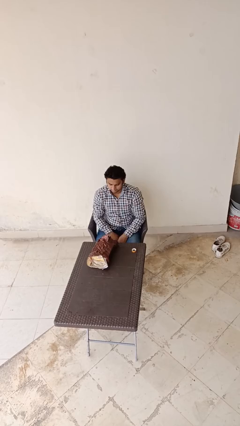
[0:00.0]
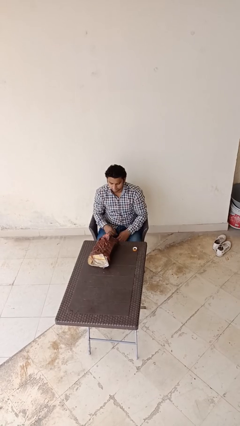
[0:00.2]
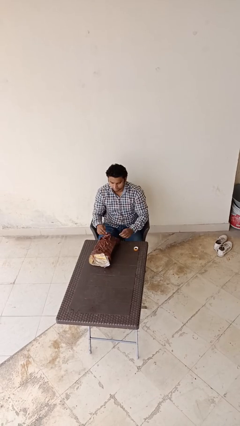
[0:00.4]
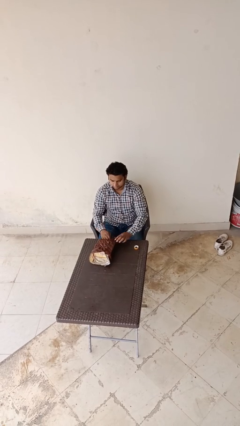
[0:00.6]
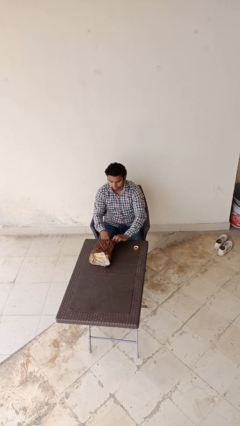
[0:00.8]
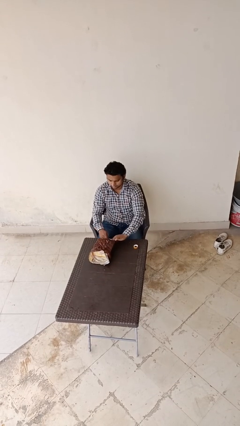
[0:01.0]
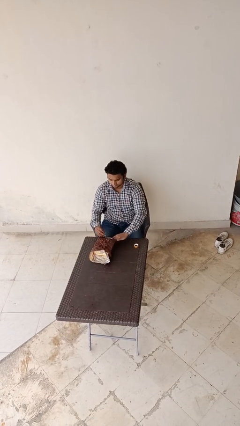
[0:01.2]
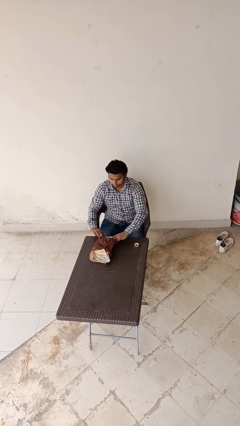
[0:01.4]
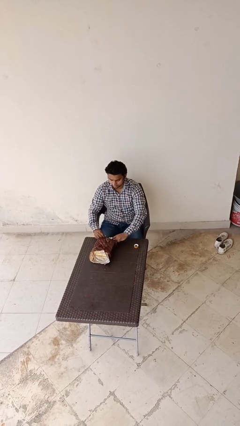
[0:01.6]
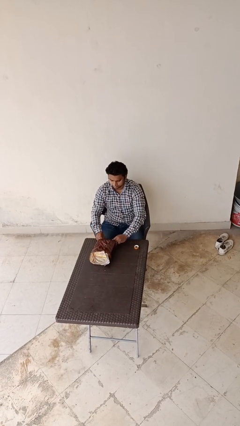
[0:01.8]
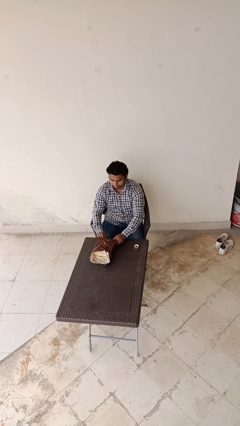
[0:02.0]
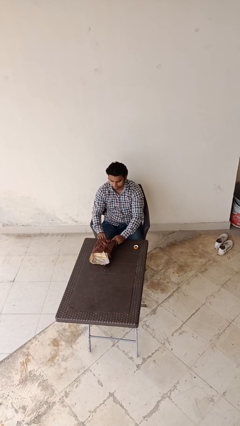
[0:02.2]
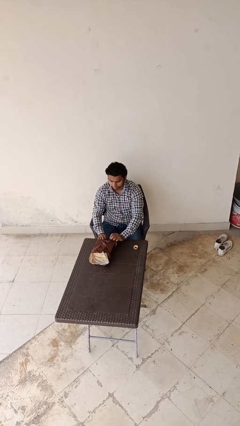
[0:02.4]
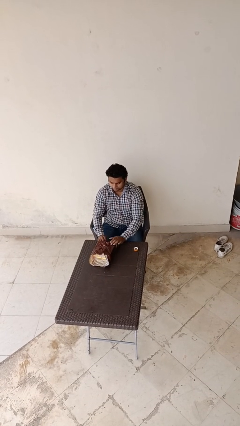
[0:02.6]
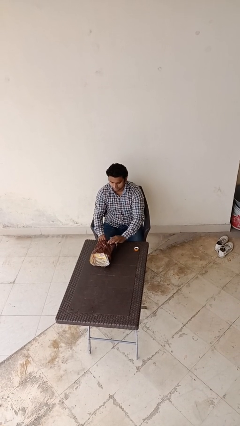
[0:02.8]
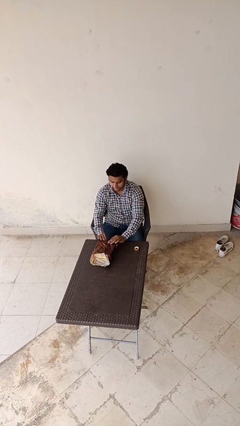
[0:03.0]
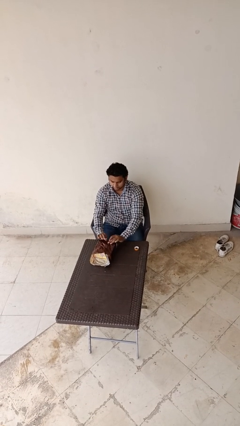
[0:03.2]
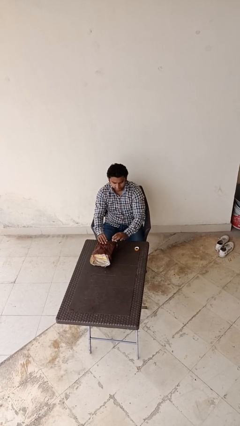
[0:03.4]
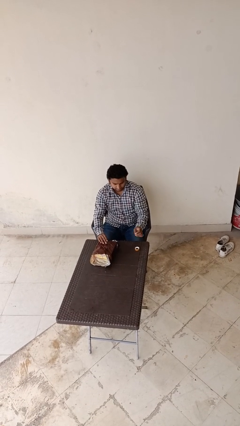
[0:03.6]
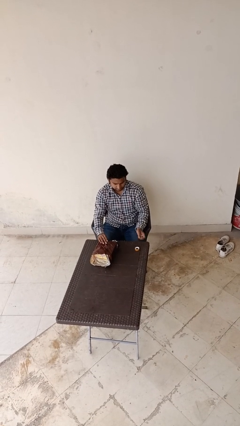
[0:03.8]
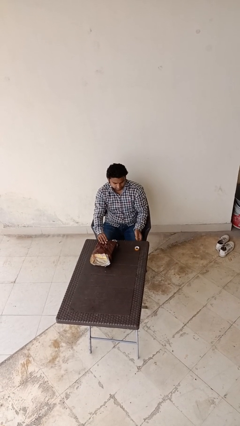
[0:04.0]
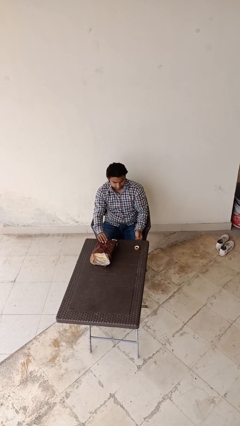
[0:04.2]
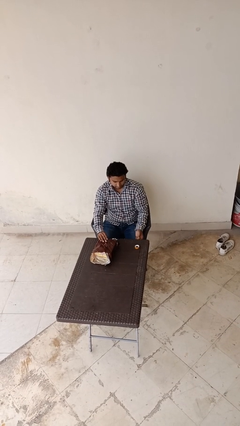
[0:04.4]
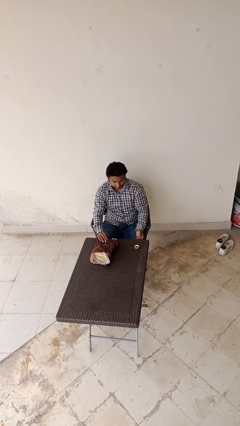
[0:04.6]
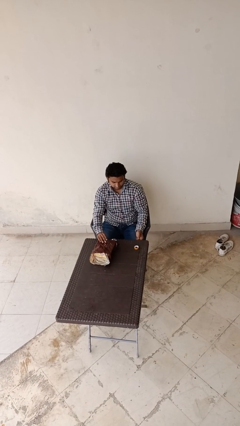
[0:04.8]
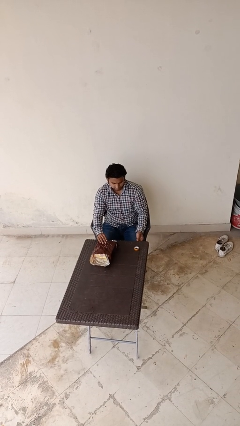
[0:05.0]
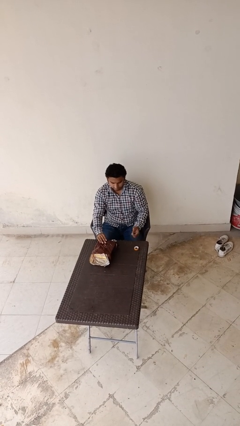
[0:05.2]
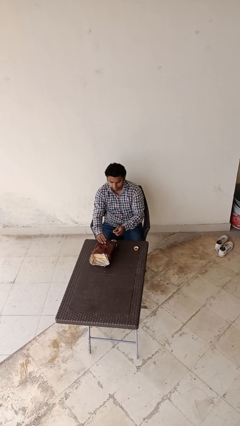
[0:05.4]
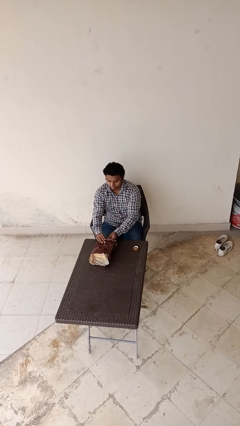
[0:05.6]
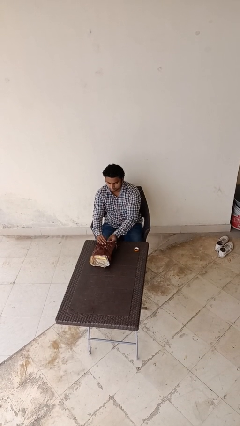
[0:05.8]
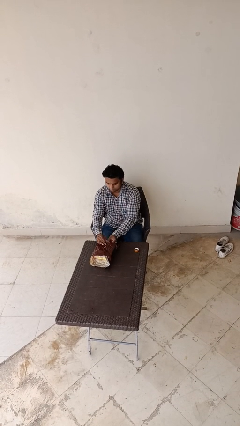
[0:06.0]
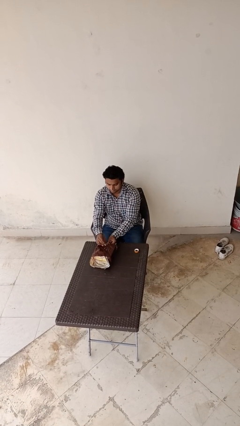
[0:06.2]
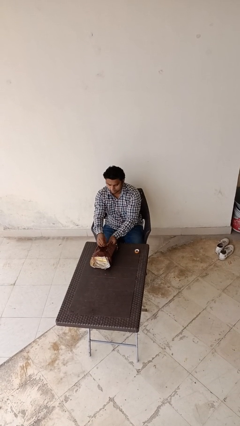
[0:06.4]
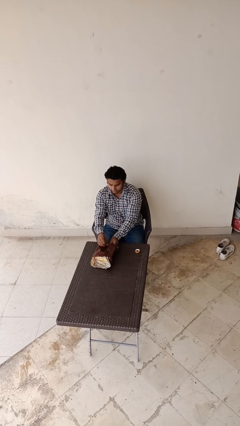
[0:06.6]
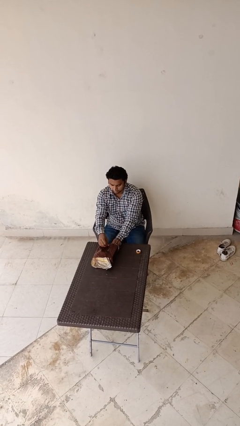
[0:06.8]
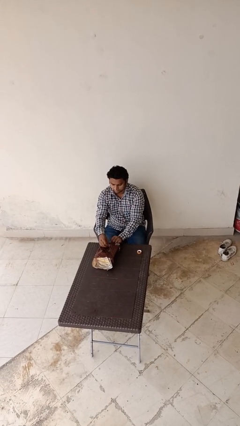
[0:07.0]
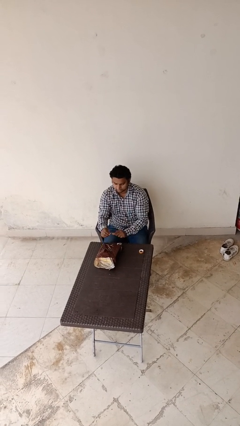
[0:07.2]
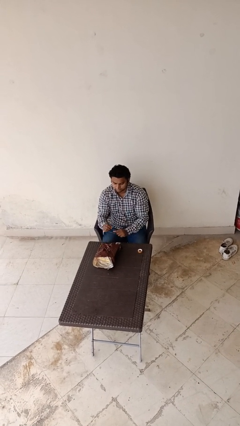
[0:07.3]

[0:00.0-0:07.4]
person wraps box

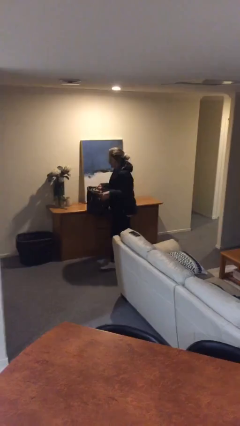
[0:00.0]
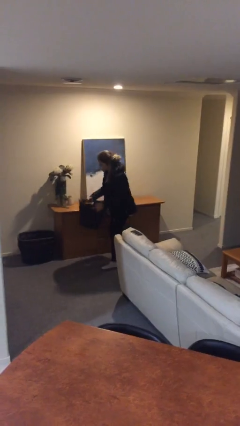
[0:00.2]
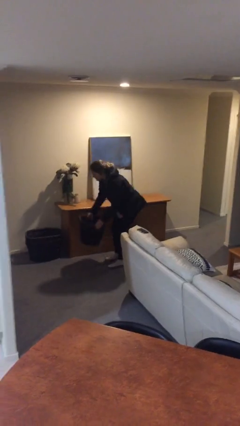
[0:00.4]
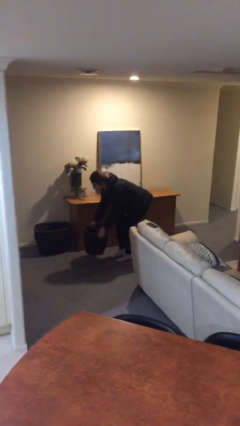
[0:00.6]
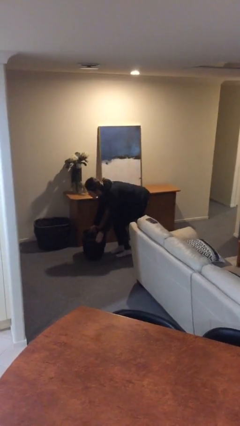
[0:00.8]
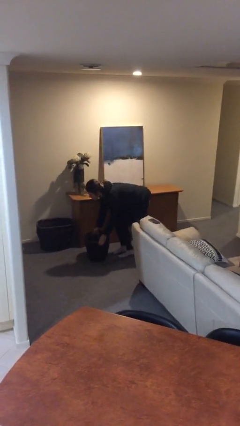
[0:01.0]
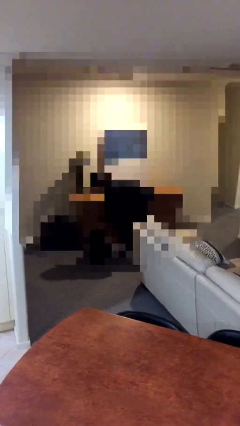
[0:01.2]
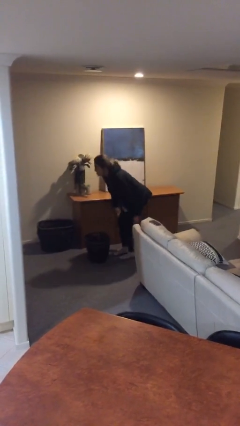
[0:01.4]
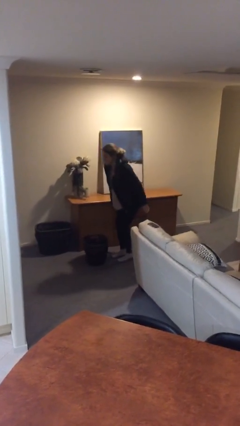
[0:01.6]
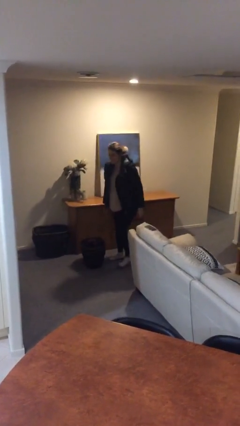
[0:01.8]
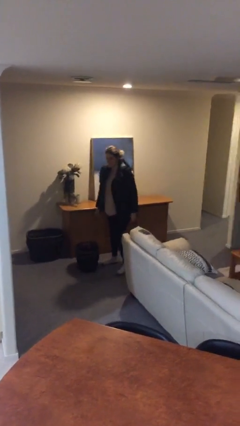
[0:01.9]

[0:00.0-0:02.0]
person puts down object on floor

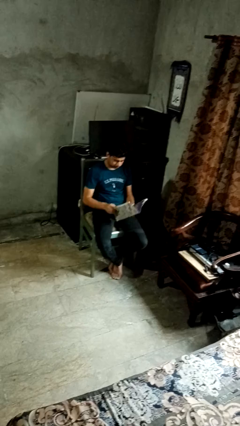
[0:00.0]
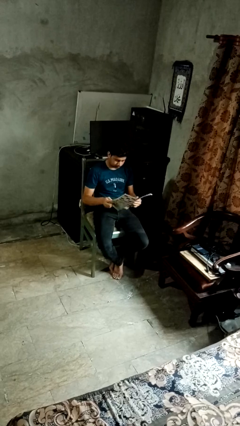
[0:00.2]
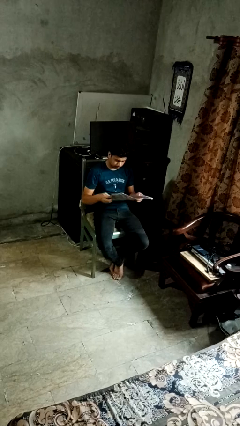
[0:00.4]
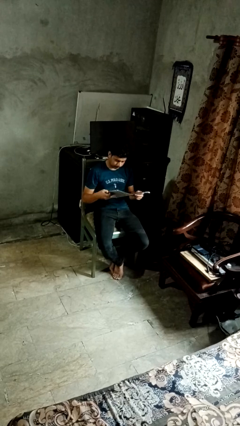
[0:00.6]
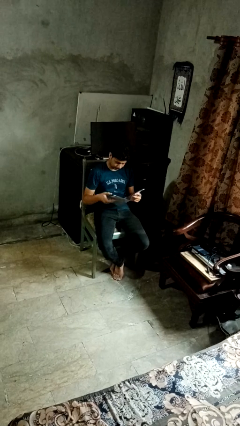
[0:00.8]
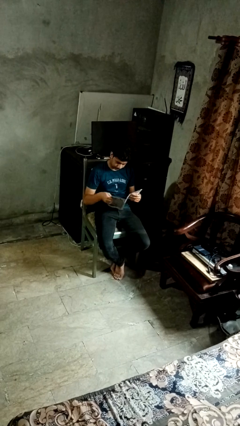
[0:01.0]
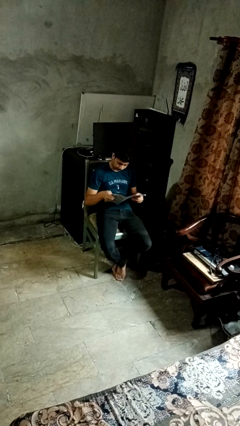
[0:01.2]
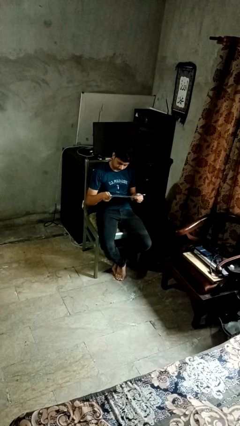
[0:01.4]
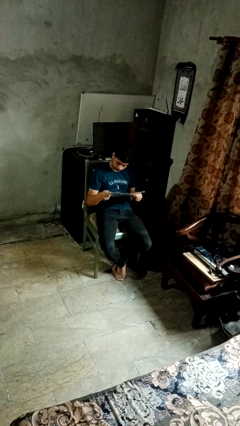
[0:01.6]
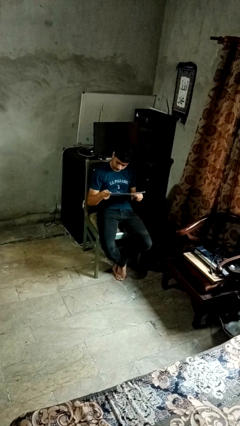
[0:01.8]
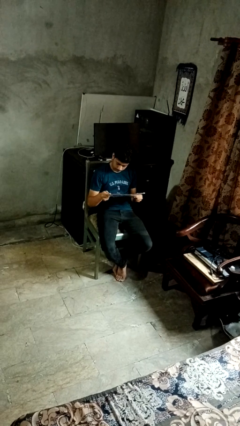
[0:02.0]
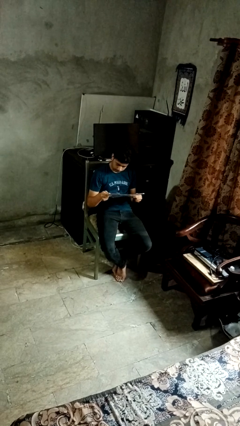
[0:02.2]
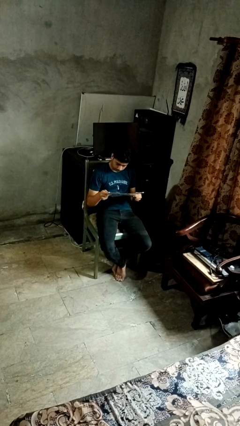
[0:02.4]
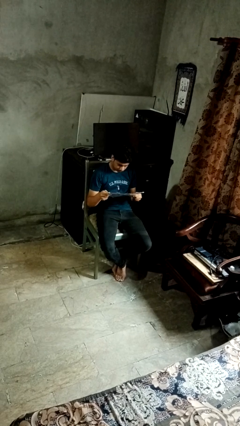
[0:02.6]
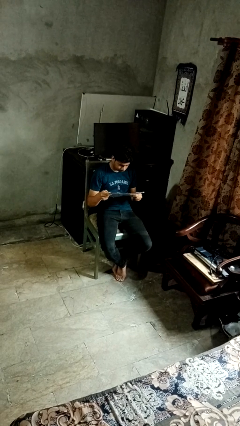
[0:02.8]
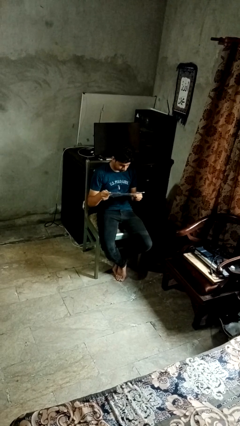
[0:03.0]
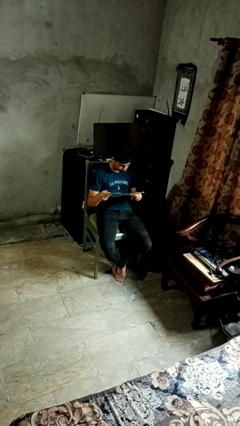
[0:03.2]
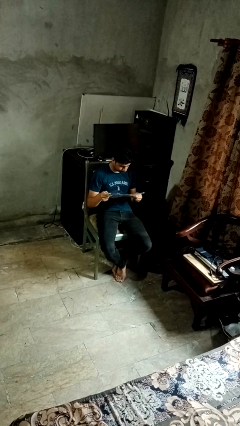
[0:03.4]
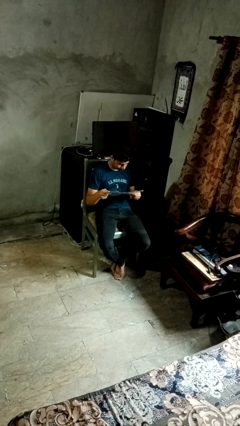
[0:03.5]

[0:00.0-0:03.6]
person reads magazine

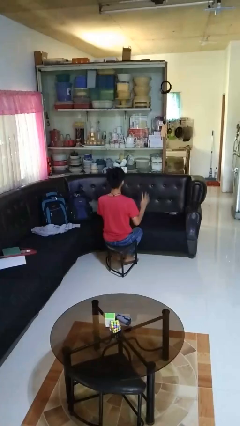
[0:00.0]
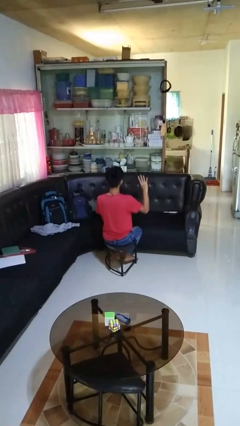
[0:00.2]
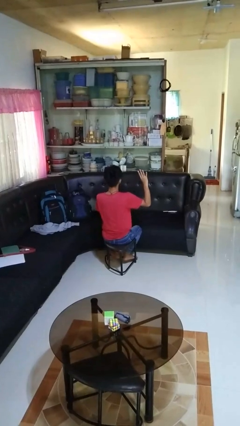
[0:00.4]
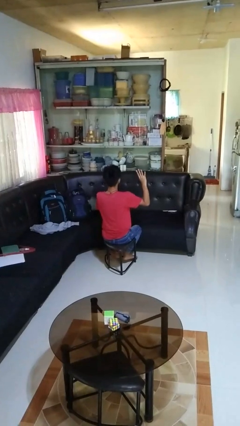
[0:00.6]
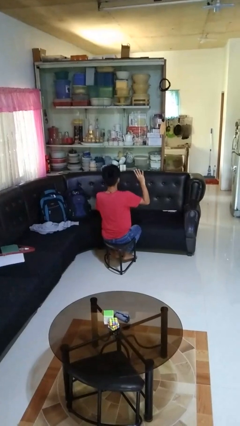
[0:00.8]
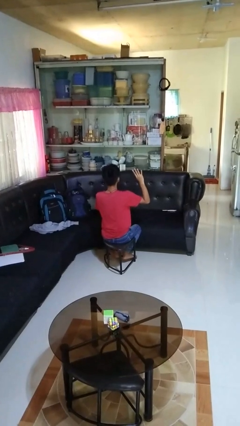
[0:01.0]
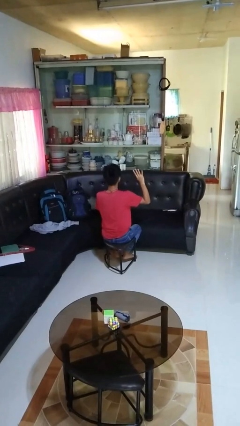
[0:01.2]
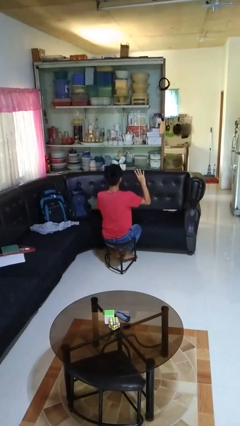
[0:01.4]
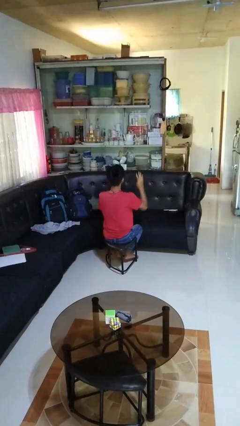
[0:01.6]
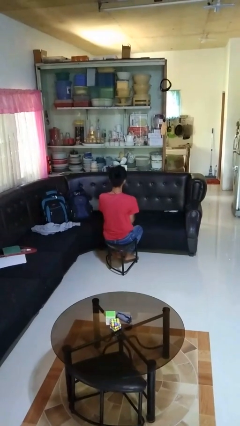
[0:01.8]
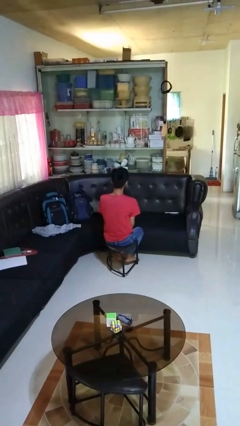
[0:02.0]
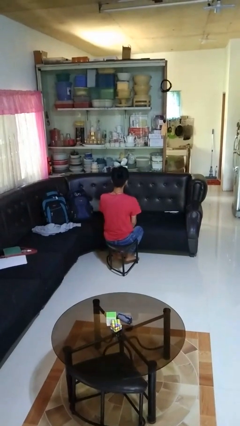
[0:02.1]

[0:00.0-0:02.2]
person gestures number four

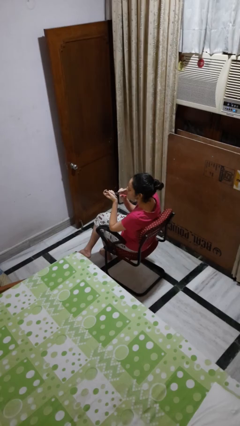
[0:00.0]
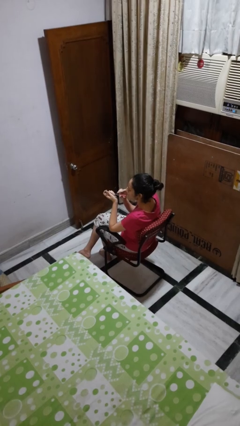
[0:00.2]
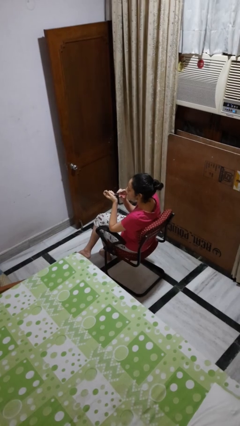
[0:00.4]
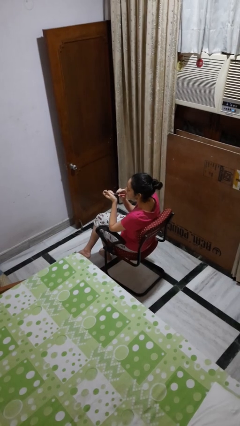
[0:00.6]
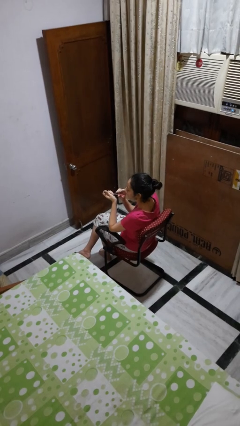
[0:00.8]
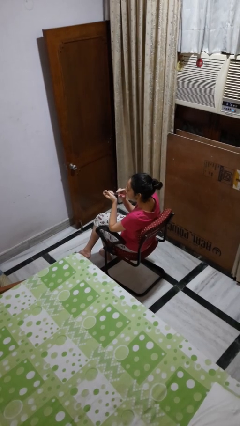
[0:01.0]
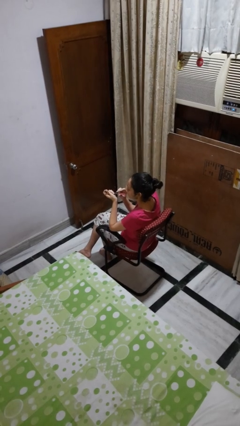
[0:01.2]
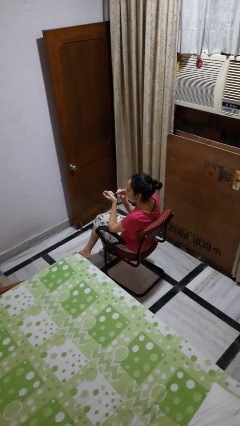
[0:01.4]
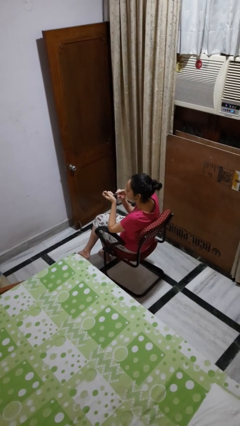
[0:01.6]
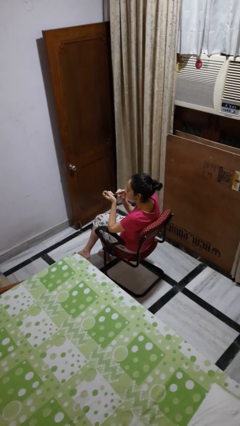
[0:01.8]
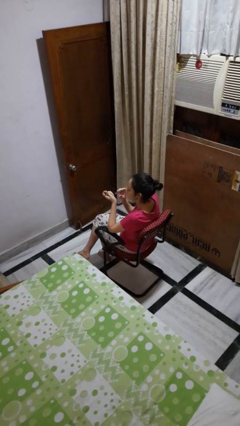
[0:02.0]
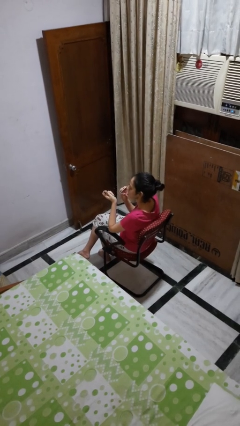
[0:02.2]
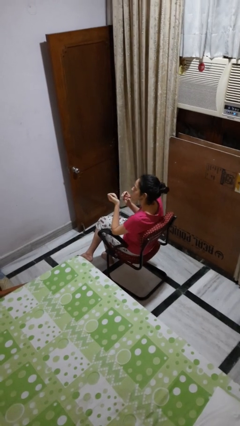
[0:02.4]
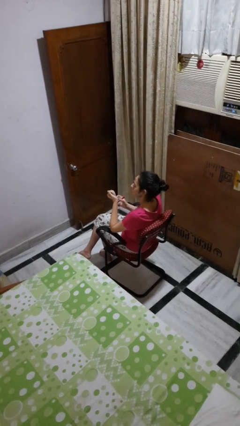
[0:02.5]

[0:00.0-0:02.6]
person clips fingernails
